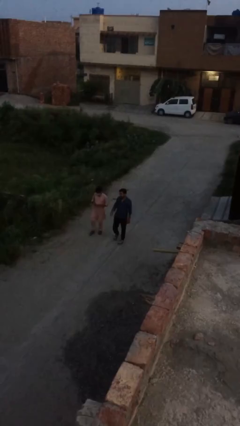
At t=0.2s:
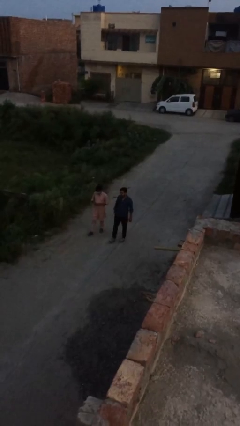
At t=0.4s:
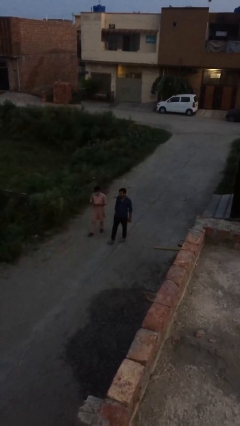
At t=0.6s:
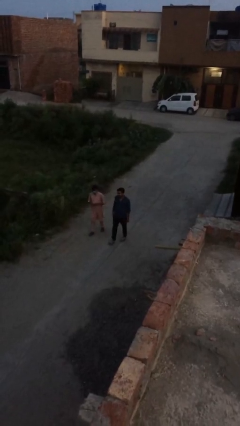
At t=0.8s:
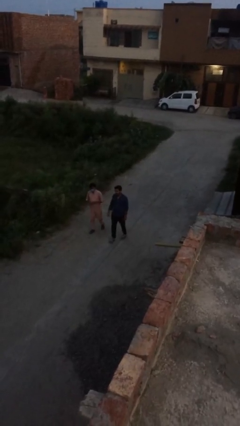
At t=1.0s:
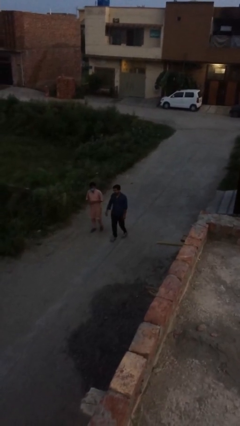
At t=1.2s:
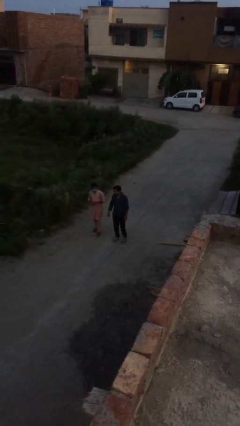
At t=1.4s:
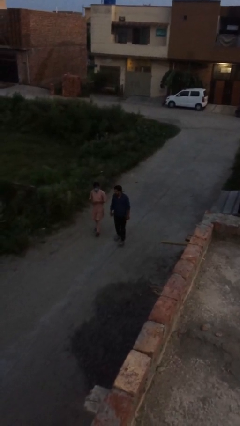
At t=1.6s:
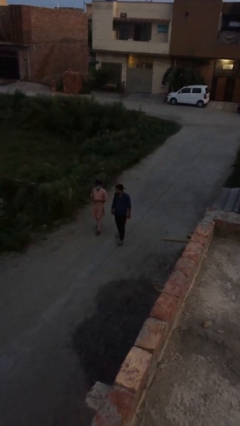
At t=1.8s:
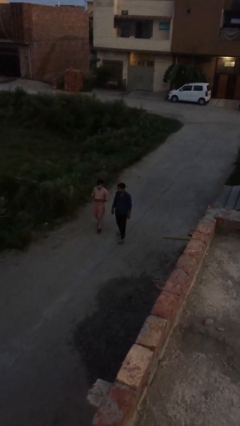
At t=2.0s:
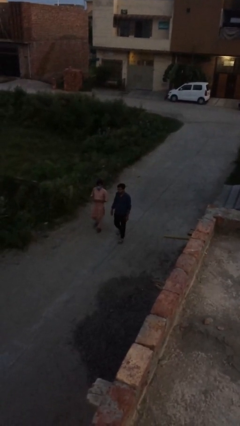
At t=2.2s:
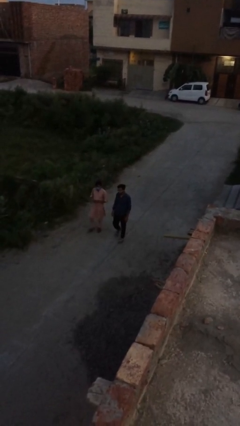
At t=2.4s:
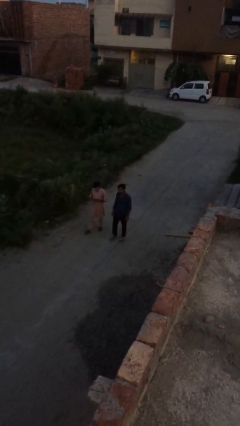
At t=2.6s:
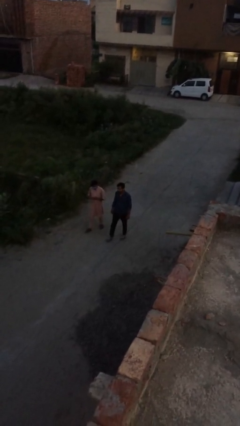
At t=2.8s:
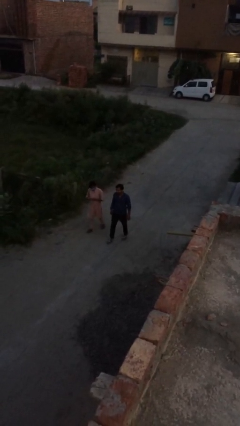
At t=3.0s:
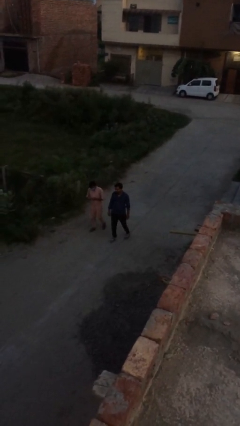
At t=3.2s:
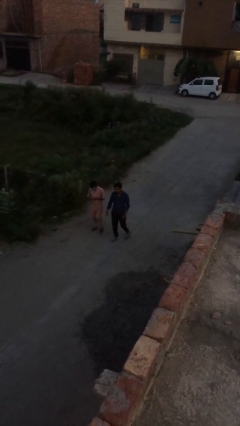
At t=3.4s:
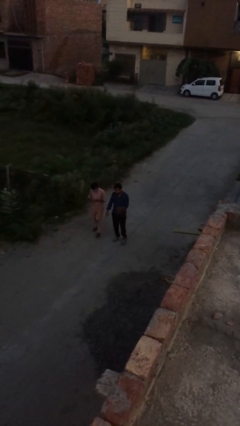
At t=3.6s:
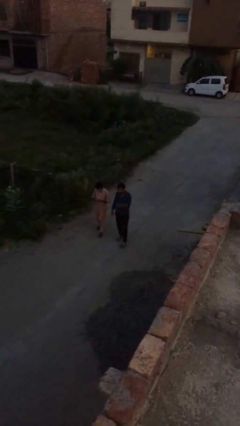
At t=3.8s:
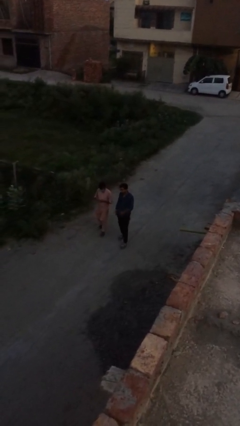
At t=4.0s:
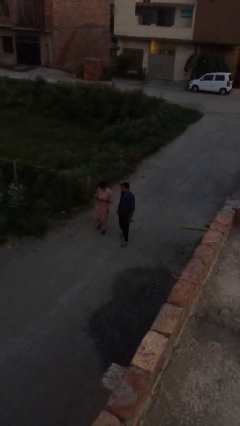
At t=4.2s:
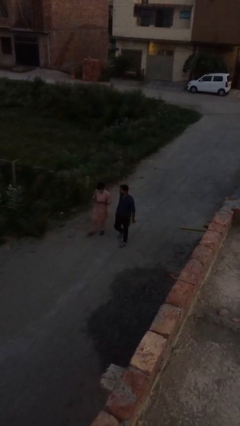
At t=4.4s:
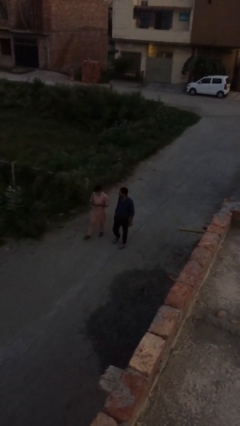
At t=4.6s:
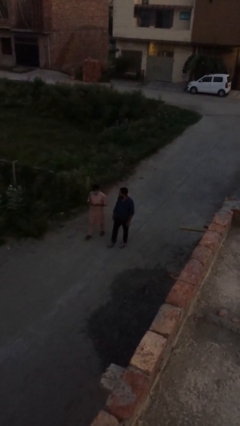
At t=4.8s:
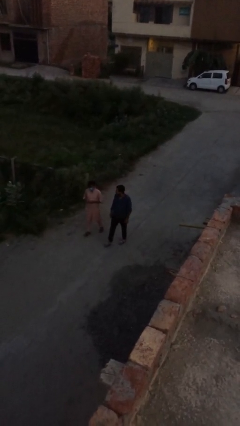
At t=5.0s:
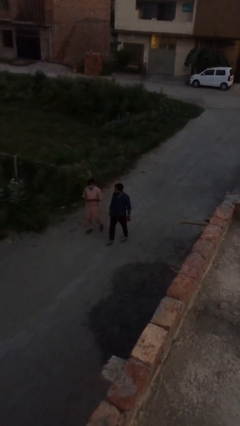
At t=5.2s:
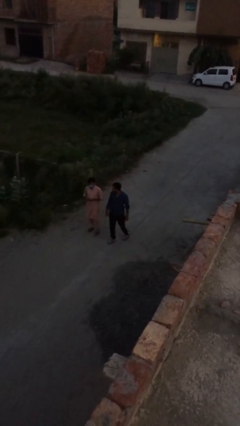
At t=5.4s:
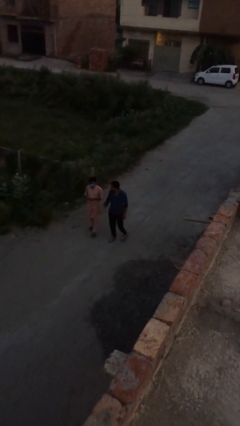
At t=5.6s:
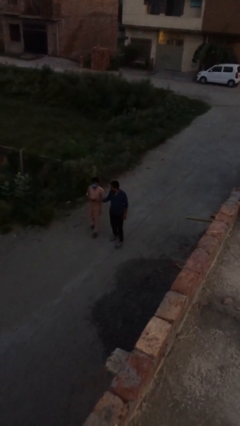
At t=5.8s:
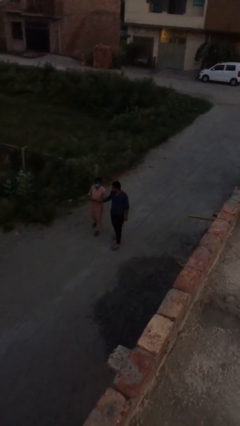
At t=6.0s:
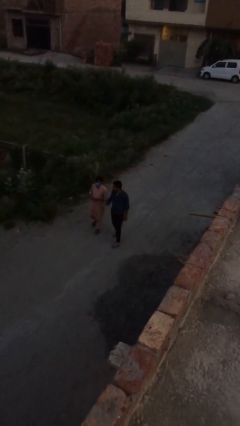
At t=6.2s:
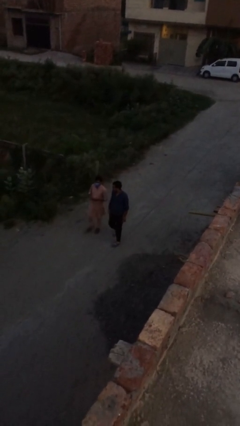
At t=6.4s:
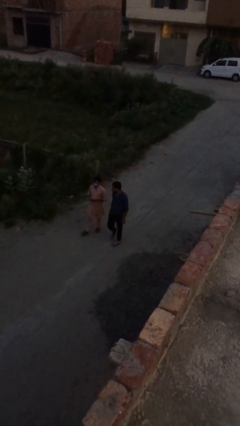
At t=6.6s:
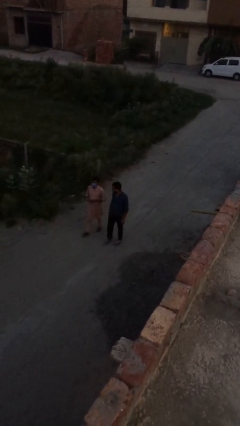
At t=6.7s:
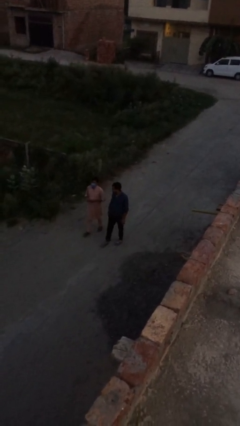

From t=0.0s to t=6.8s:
person talks to person

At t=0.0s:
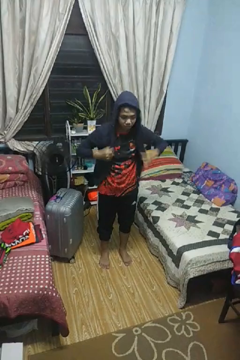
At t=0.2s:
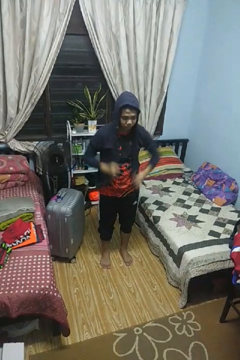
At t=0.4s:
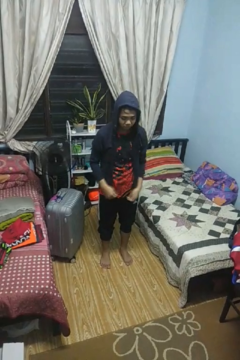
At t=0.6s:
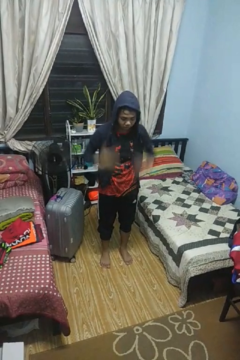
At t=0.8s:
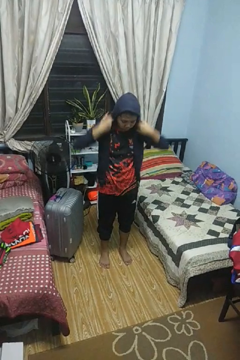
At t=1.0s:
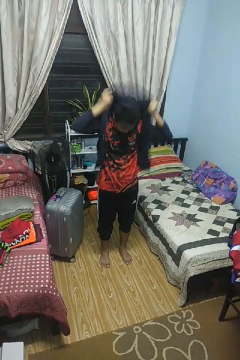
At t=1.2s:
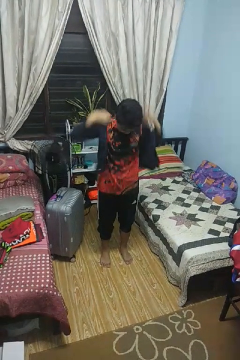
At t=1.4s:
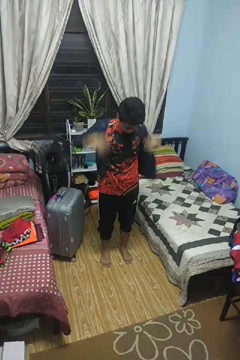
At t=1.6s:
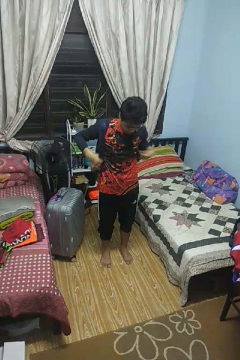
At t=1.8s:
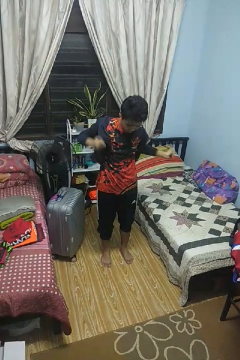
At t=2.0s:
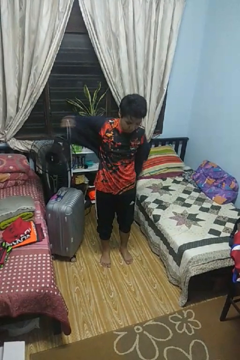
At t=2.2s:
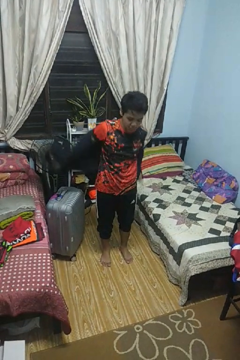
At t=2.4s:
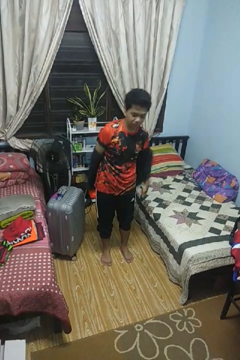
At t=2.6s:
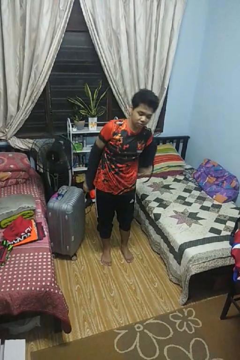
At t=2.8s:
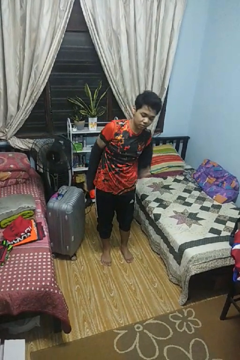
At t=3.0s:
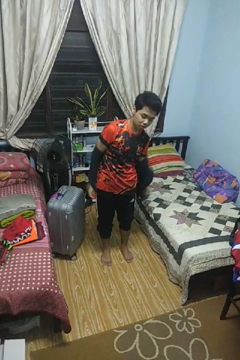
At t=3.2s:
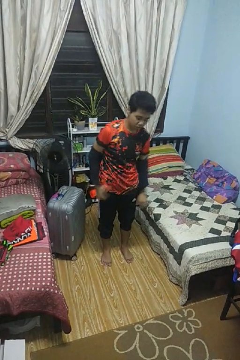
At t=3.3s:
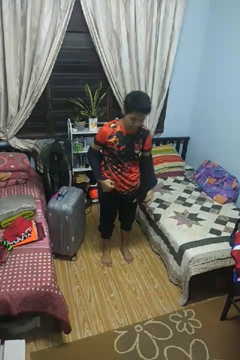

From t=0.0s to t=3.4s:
person takes off hoodie

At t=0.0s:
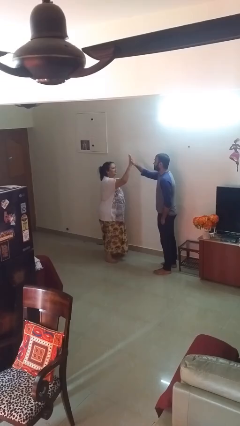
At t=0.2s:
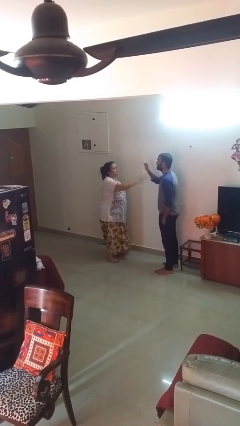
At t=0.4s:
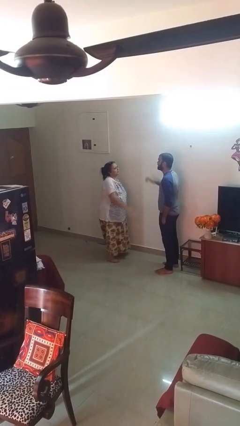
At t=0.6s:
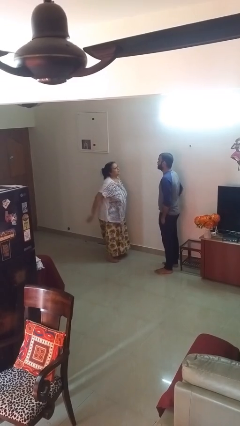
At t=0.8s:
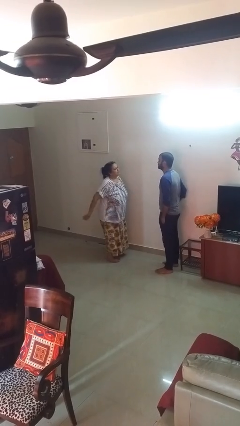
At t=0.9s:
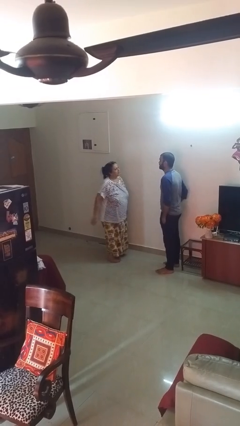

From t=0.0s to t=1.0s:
person highfives hand

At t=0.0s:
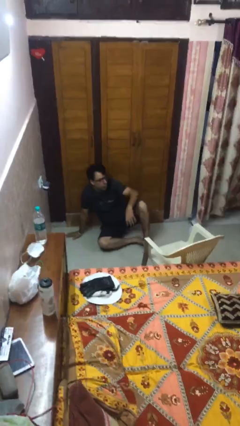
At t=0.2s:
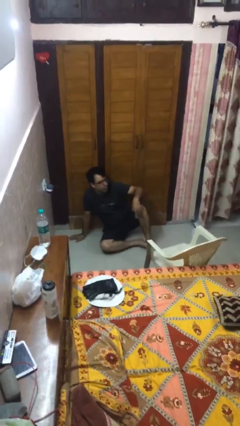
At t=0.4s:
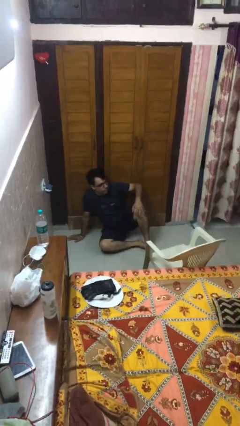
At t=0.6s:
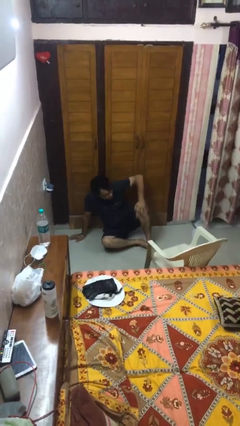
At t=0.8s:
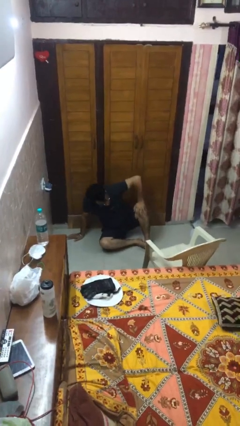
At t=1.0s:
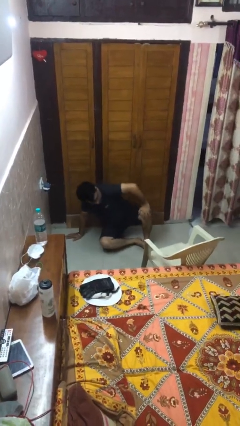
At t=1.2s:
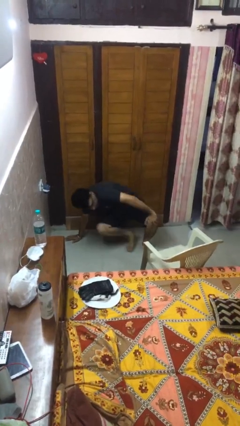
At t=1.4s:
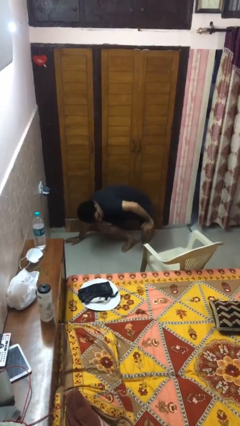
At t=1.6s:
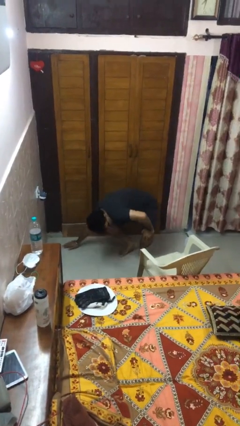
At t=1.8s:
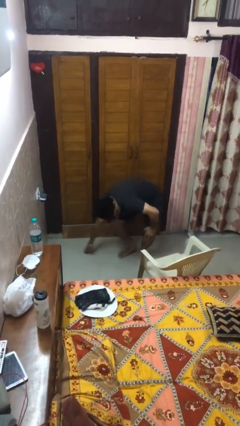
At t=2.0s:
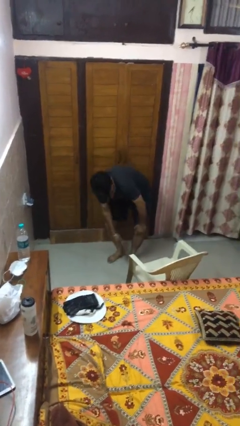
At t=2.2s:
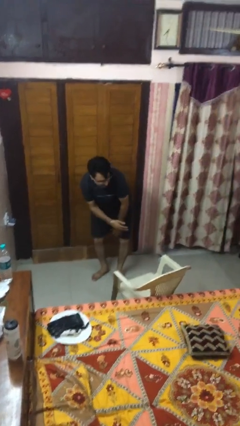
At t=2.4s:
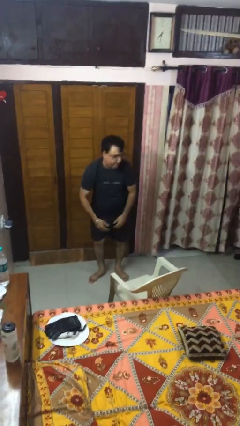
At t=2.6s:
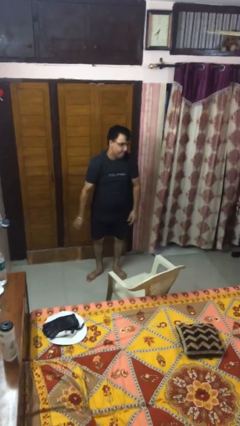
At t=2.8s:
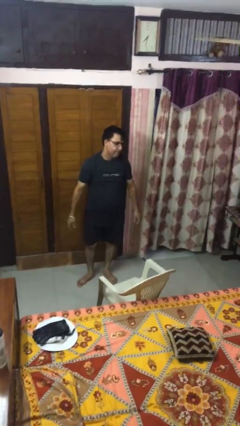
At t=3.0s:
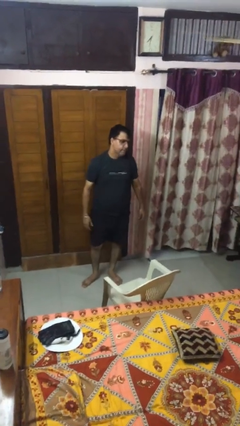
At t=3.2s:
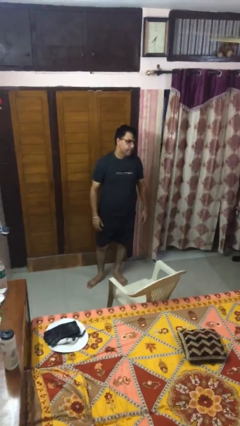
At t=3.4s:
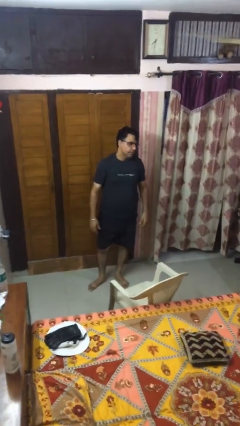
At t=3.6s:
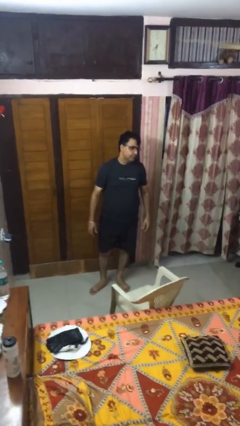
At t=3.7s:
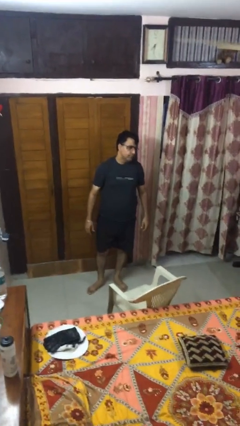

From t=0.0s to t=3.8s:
person stands up from floor

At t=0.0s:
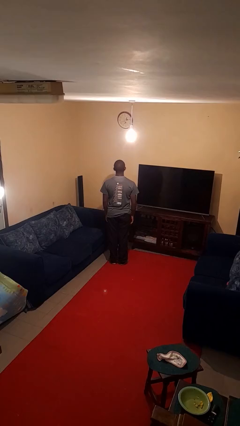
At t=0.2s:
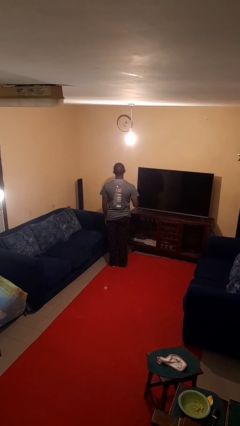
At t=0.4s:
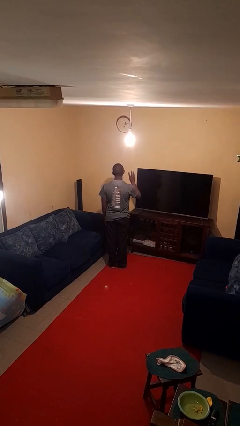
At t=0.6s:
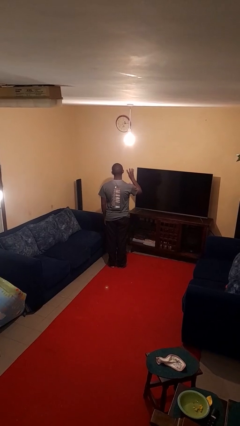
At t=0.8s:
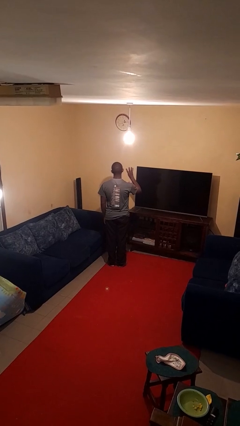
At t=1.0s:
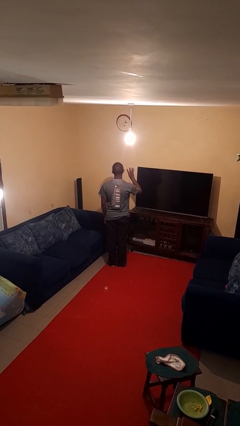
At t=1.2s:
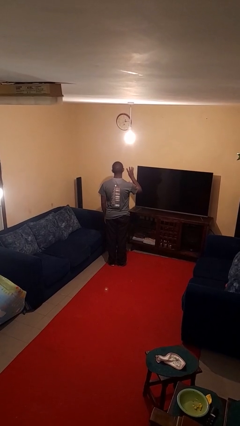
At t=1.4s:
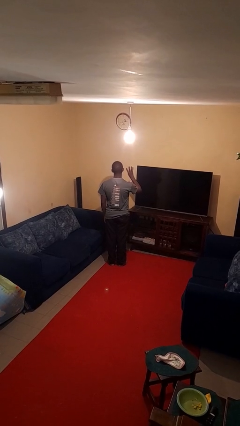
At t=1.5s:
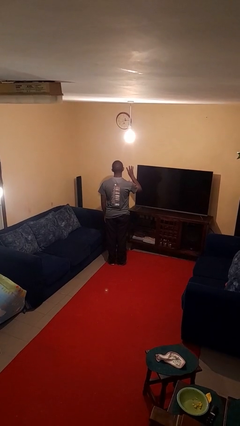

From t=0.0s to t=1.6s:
person gestures number four

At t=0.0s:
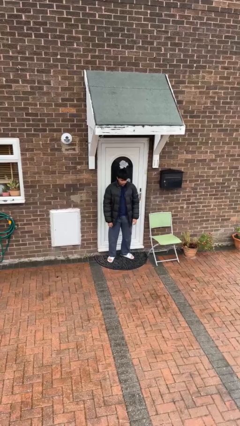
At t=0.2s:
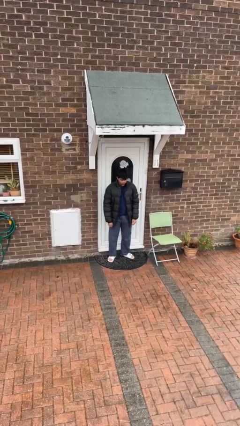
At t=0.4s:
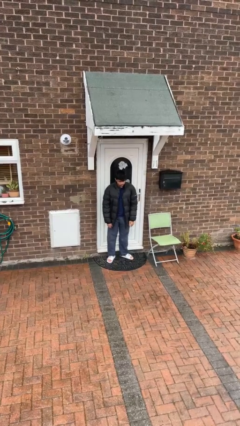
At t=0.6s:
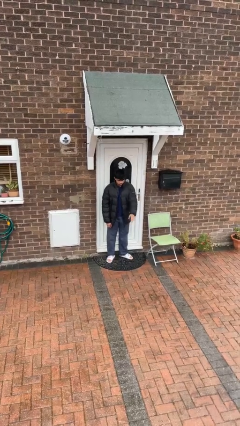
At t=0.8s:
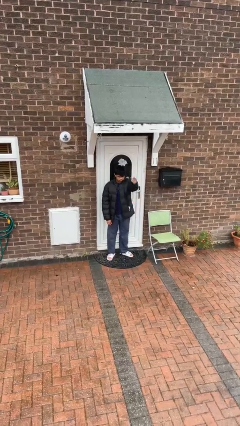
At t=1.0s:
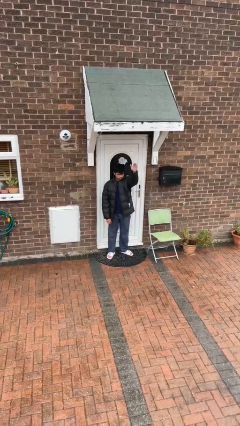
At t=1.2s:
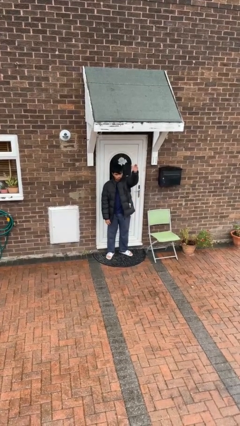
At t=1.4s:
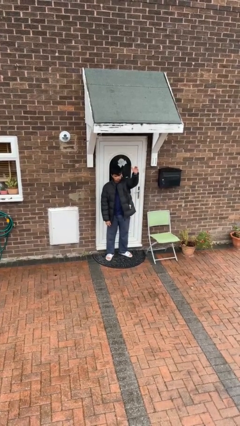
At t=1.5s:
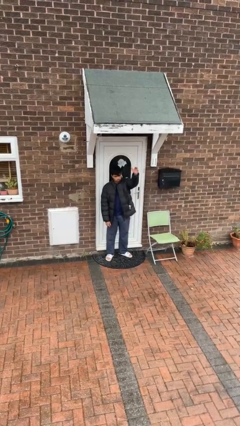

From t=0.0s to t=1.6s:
person gestures swipe up
